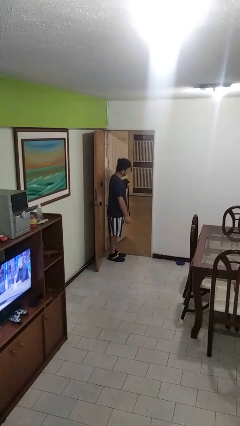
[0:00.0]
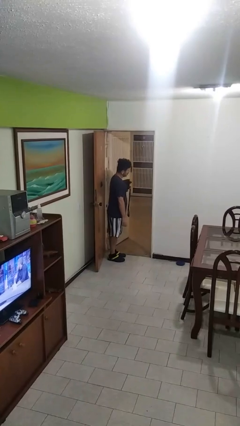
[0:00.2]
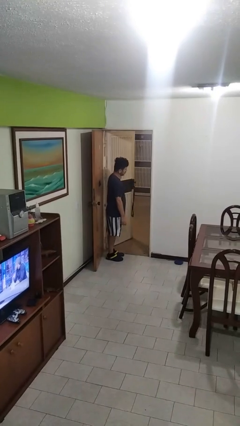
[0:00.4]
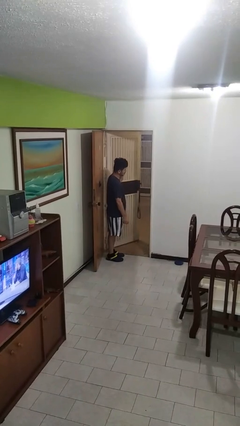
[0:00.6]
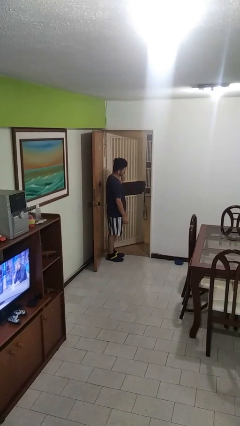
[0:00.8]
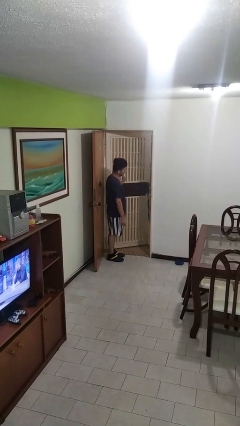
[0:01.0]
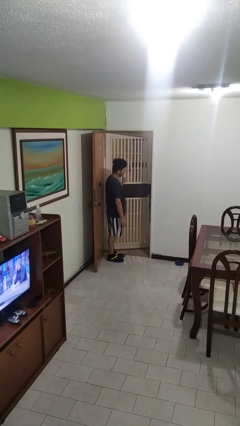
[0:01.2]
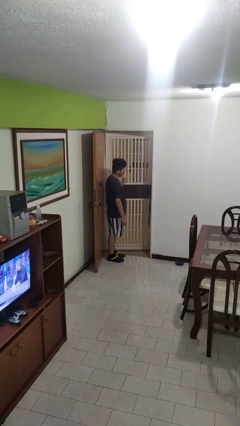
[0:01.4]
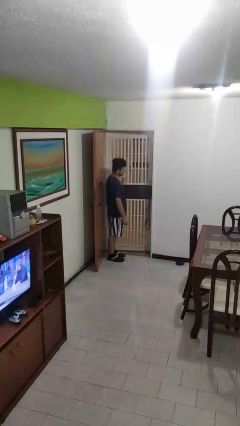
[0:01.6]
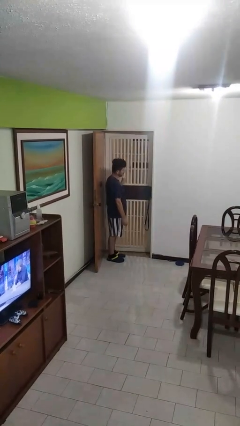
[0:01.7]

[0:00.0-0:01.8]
person closes facility door

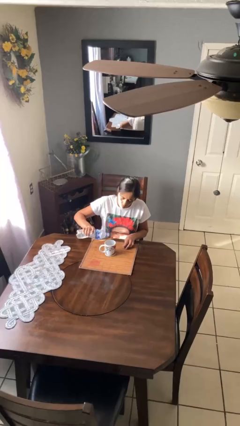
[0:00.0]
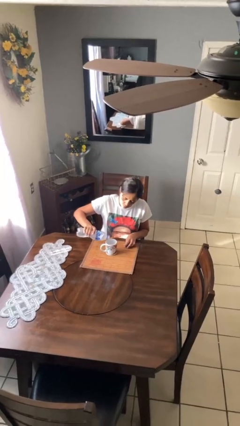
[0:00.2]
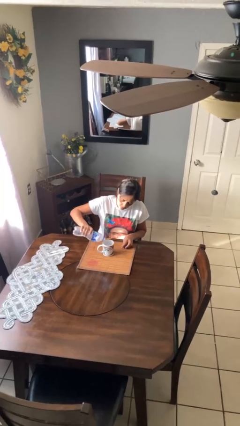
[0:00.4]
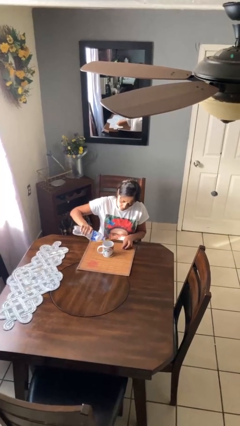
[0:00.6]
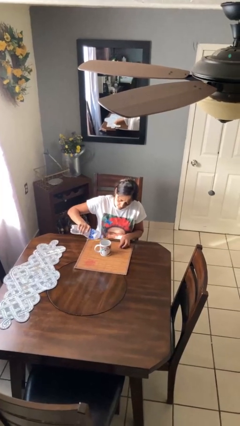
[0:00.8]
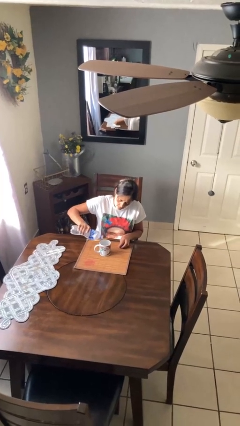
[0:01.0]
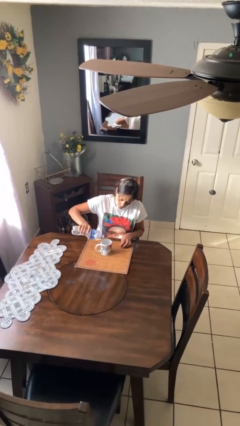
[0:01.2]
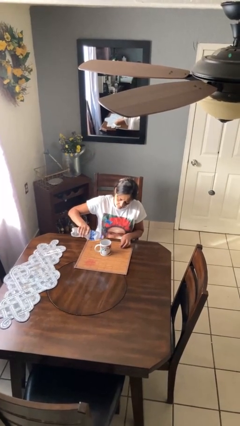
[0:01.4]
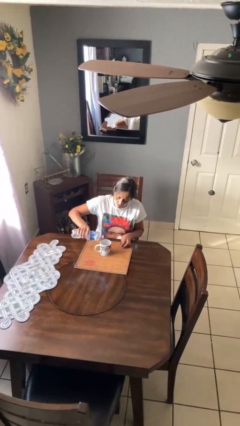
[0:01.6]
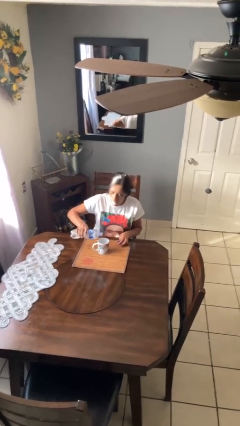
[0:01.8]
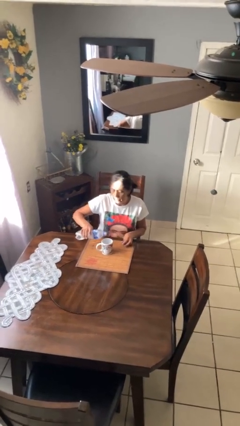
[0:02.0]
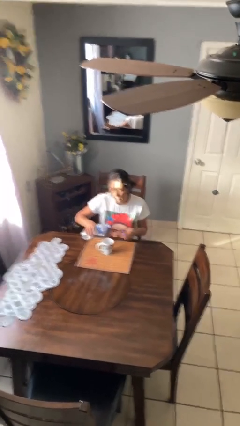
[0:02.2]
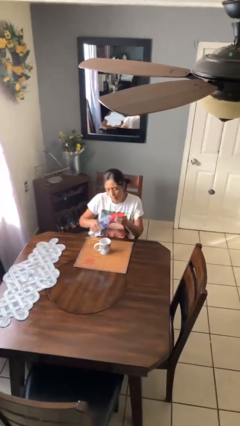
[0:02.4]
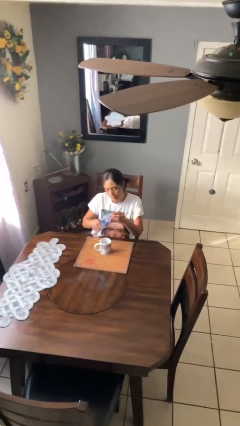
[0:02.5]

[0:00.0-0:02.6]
person pours liquid into cup

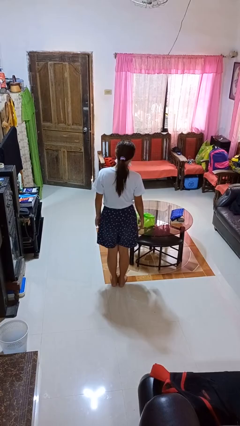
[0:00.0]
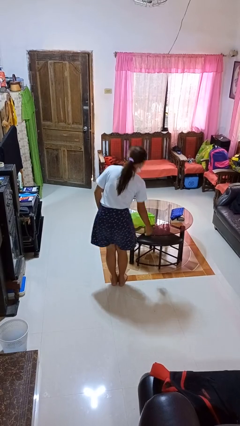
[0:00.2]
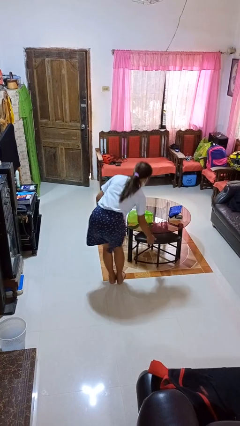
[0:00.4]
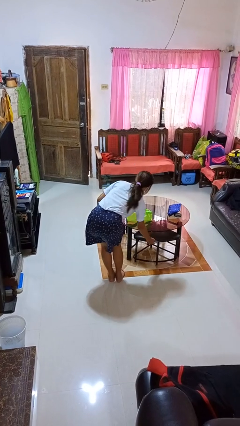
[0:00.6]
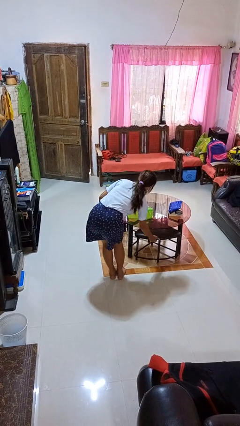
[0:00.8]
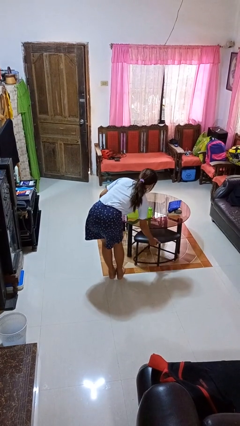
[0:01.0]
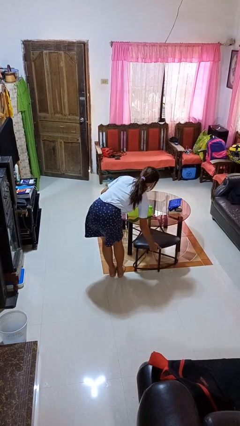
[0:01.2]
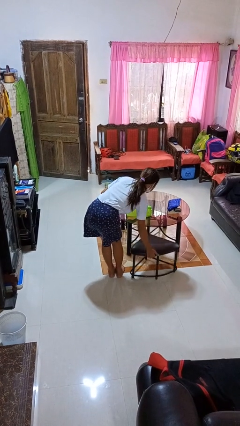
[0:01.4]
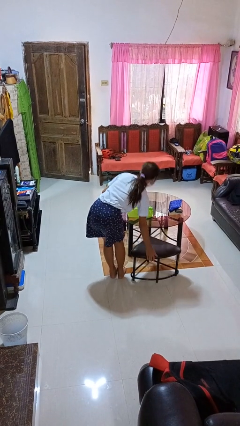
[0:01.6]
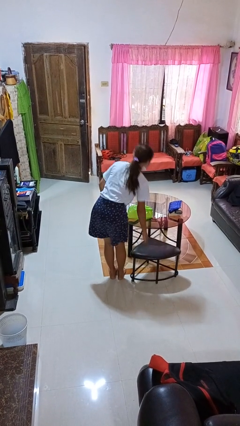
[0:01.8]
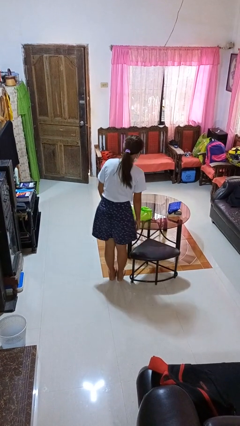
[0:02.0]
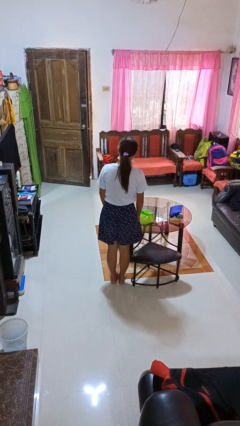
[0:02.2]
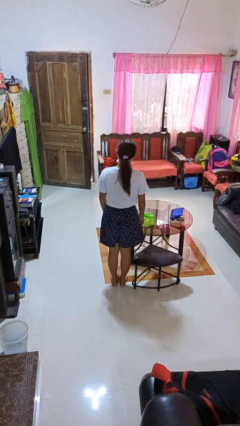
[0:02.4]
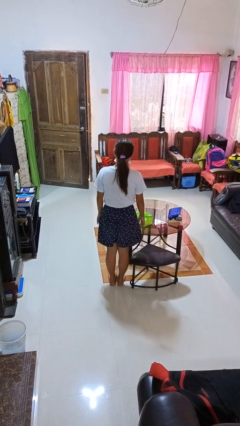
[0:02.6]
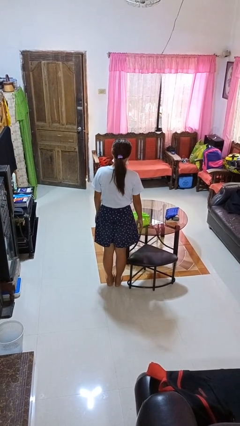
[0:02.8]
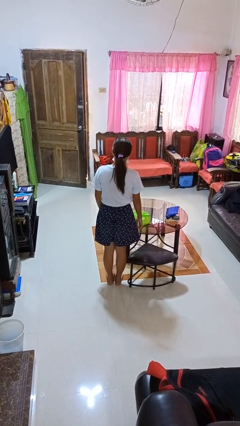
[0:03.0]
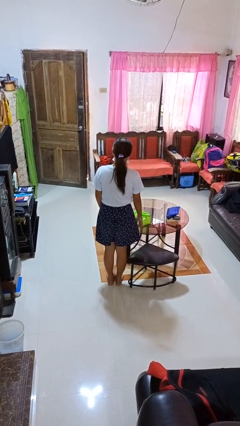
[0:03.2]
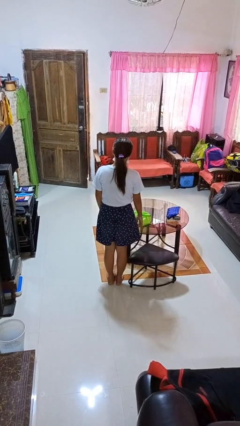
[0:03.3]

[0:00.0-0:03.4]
person pulls out chair

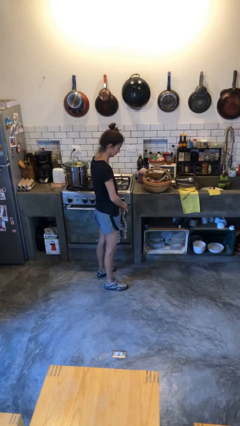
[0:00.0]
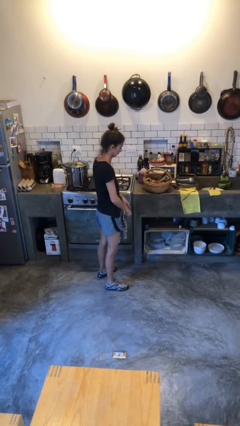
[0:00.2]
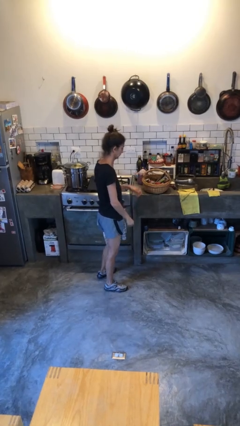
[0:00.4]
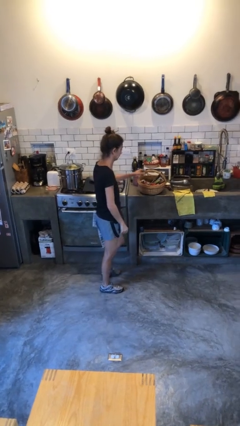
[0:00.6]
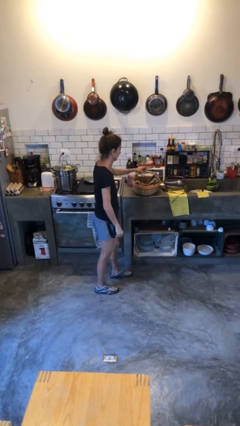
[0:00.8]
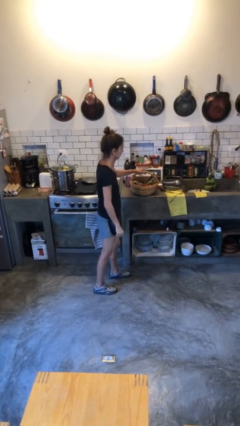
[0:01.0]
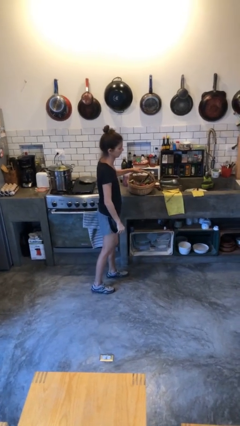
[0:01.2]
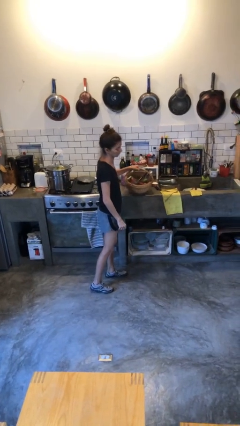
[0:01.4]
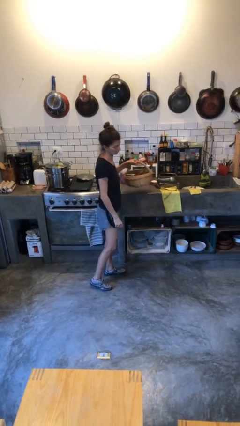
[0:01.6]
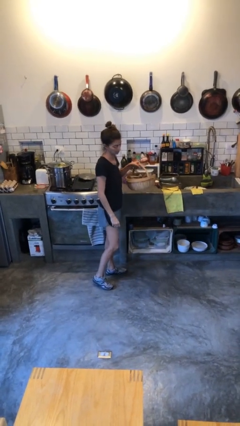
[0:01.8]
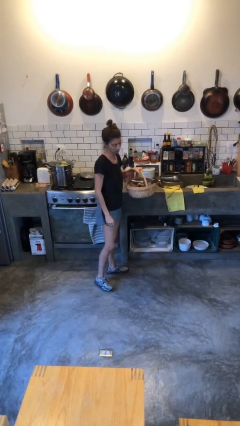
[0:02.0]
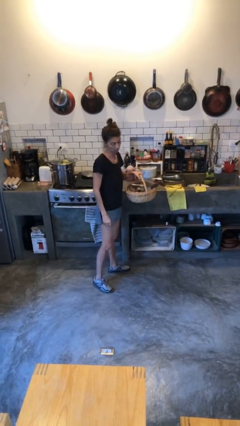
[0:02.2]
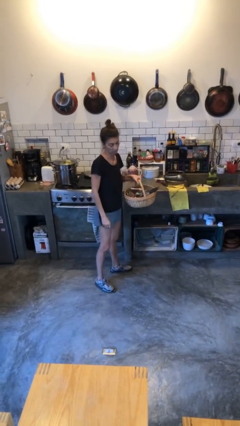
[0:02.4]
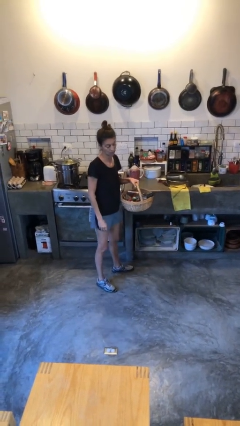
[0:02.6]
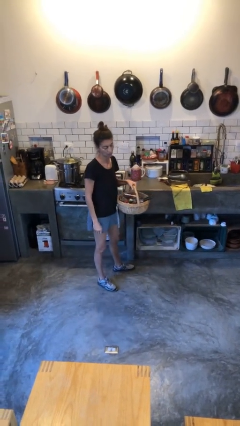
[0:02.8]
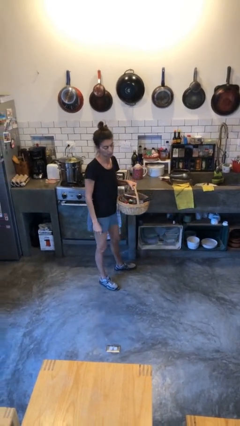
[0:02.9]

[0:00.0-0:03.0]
person picks up object from countertop

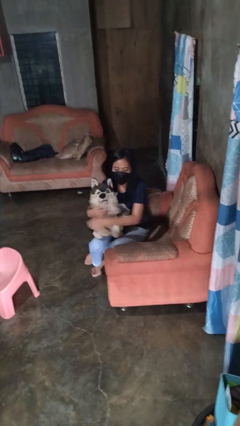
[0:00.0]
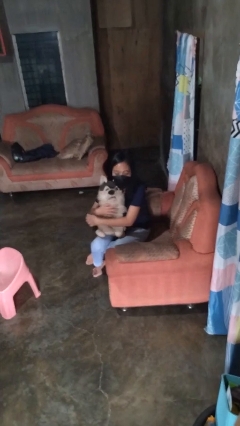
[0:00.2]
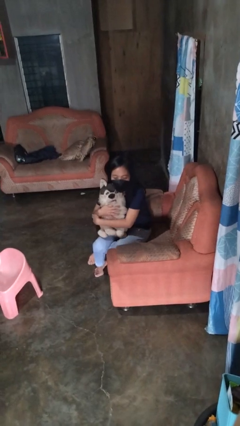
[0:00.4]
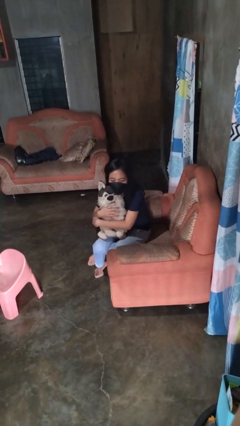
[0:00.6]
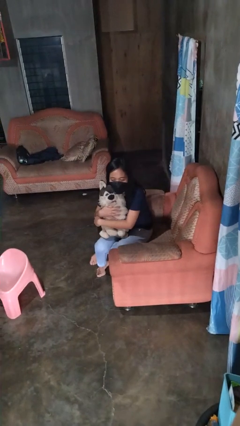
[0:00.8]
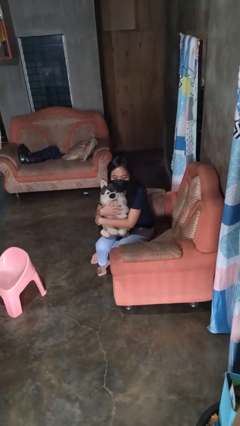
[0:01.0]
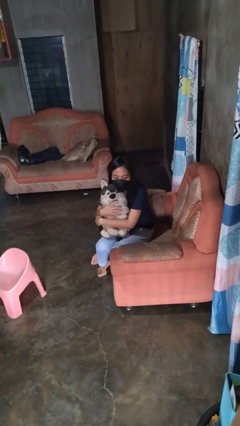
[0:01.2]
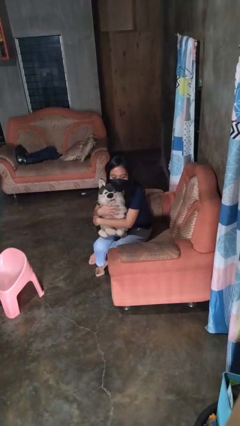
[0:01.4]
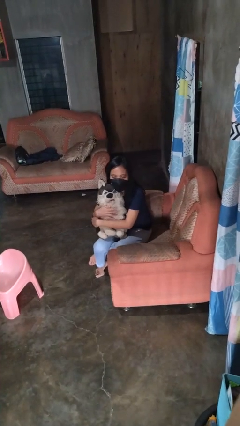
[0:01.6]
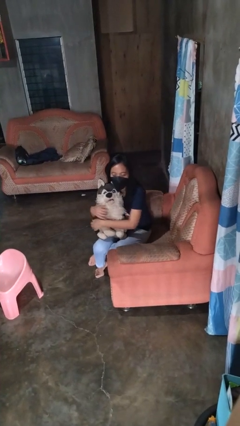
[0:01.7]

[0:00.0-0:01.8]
person hugs stuffed animal

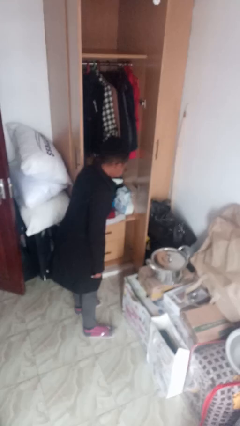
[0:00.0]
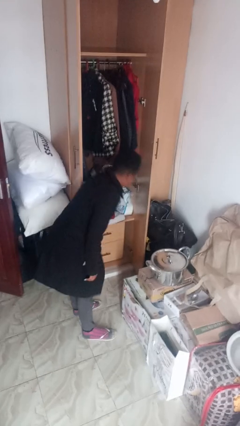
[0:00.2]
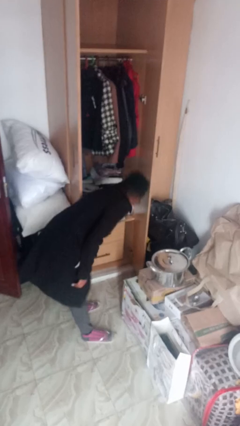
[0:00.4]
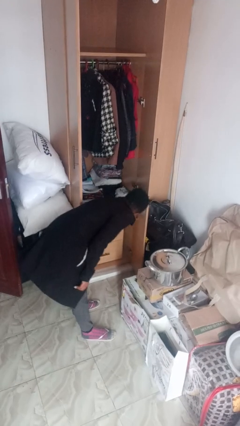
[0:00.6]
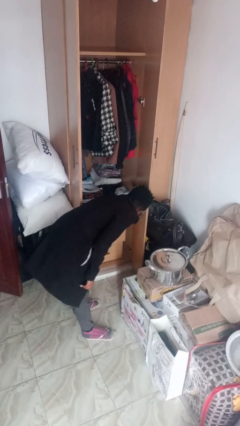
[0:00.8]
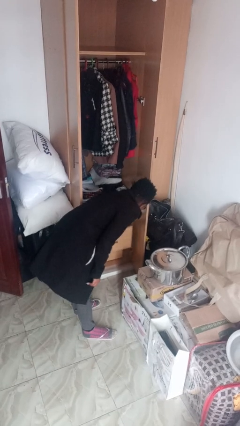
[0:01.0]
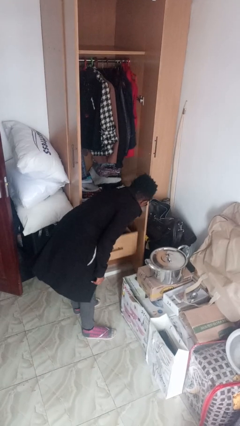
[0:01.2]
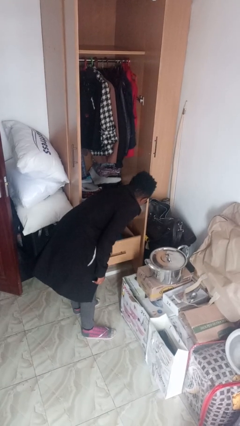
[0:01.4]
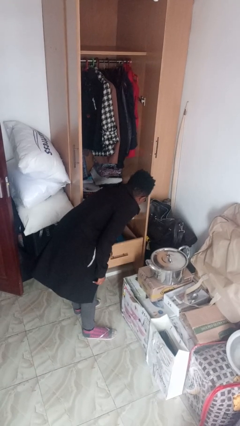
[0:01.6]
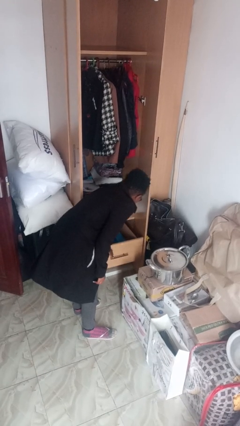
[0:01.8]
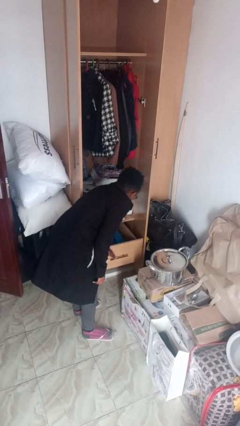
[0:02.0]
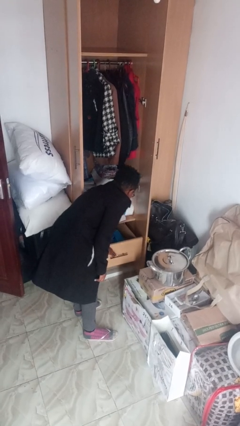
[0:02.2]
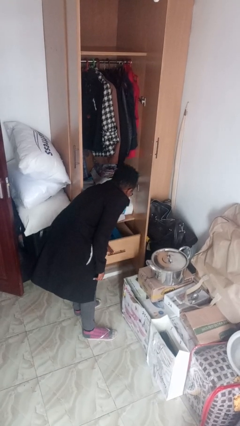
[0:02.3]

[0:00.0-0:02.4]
person opens dresser drawer

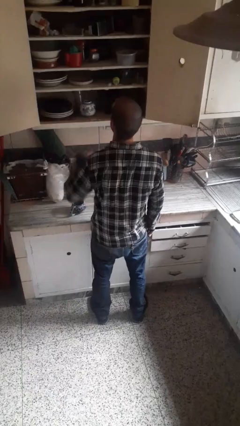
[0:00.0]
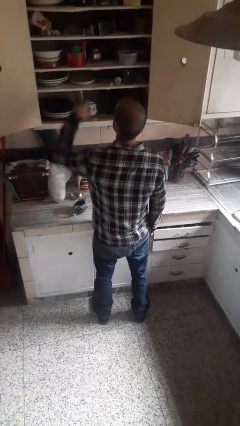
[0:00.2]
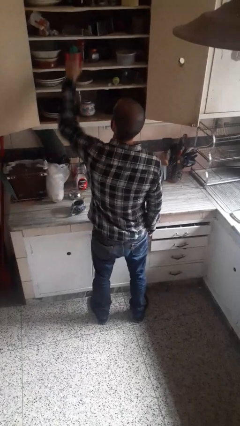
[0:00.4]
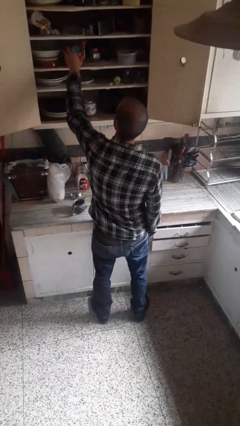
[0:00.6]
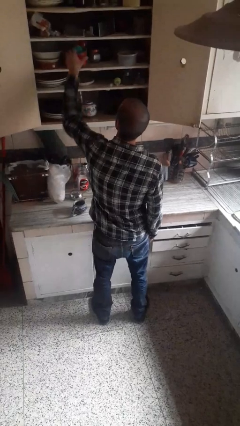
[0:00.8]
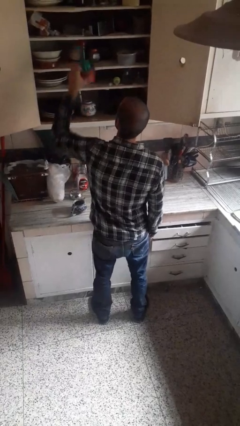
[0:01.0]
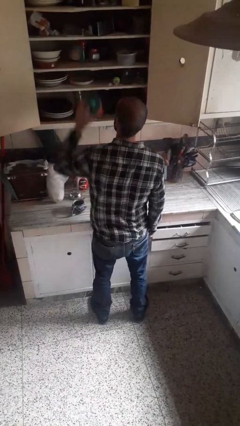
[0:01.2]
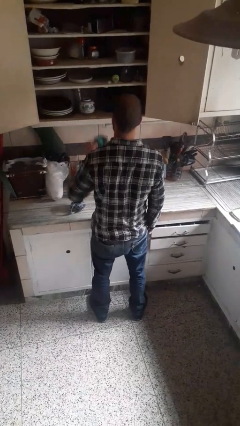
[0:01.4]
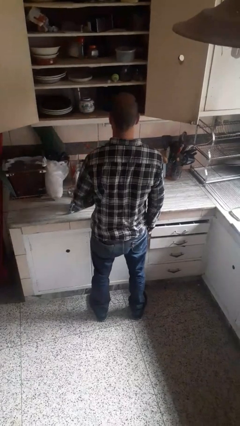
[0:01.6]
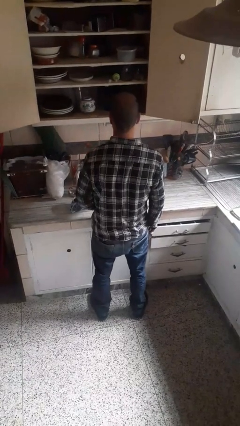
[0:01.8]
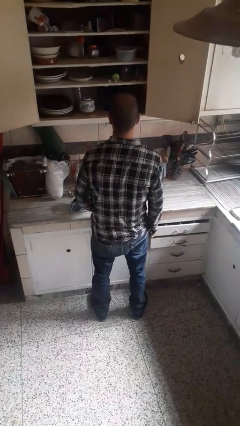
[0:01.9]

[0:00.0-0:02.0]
person takes object from cabinet
